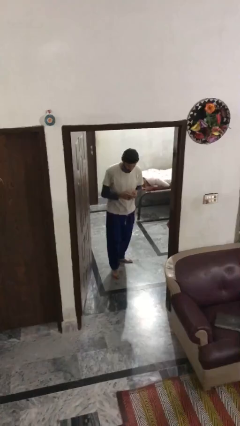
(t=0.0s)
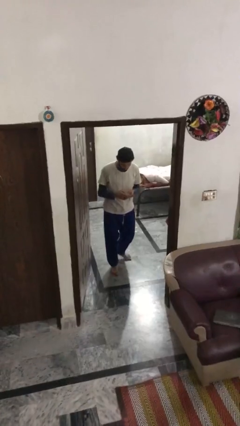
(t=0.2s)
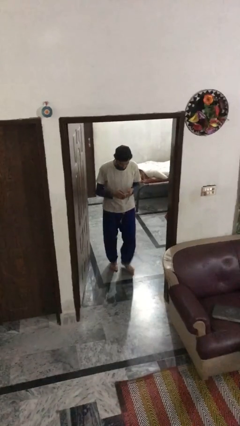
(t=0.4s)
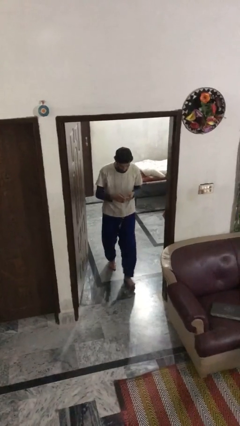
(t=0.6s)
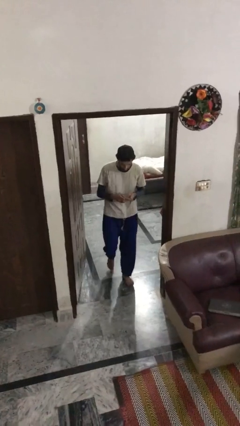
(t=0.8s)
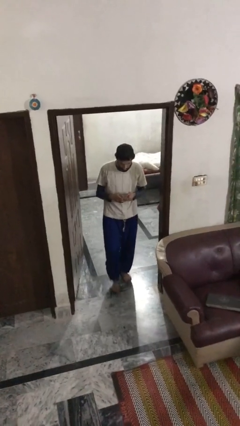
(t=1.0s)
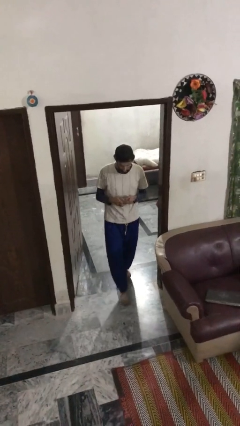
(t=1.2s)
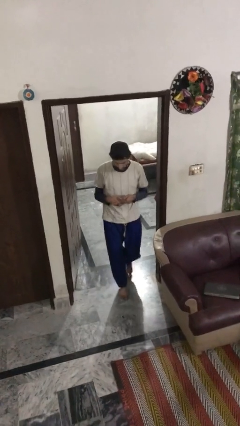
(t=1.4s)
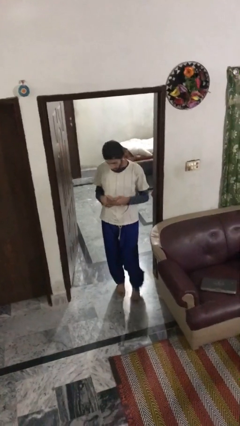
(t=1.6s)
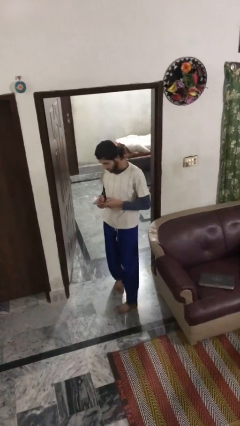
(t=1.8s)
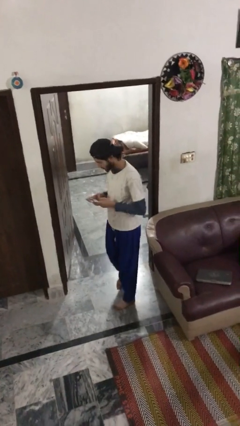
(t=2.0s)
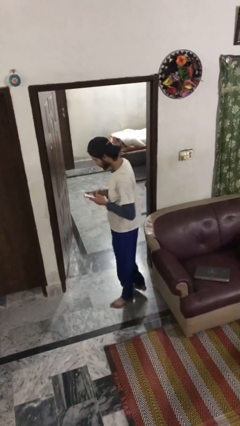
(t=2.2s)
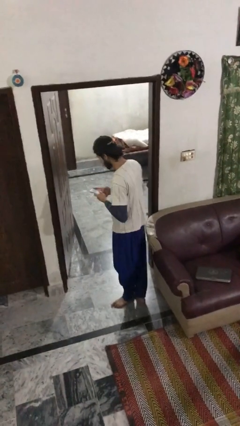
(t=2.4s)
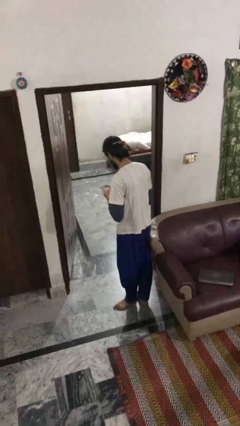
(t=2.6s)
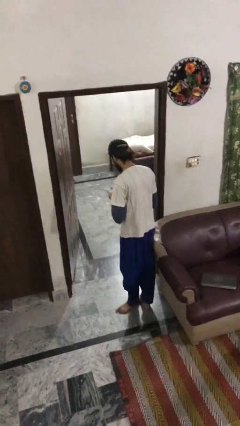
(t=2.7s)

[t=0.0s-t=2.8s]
person enters scene through structure

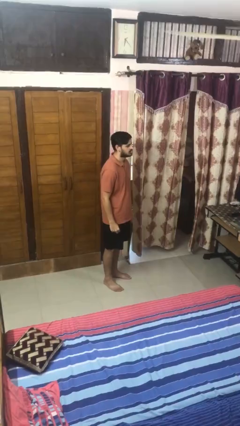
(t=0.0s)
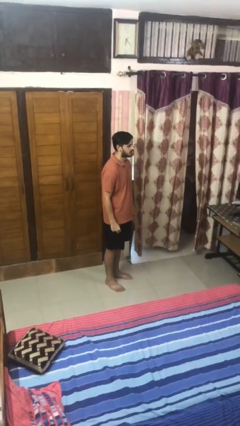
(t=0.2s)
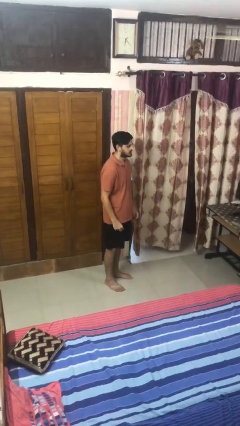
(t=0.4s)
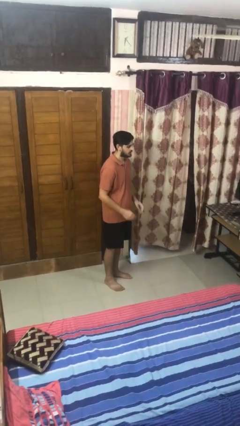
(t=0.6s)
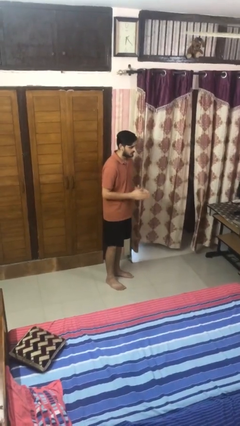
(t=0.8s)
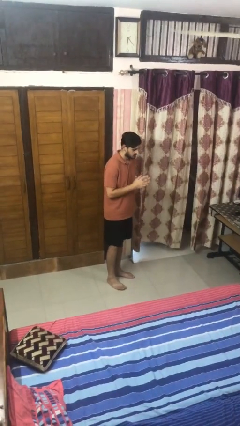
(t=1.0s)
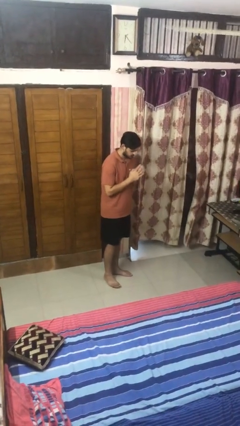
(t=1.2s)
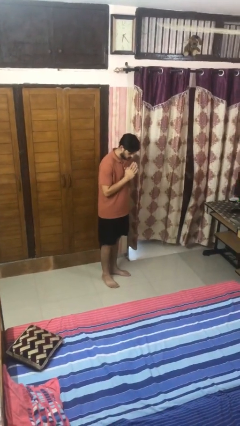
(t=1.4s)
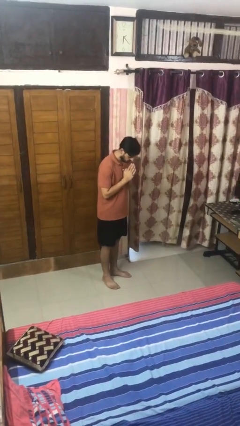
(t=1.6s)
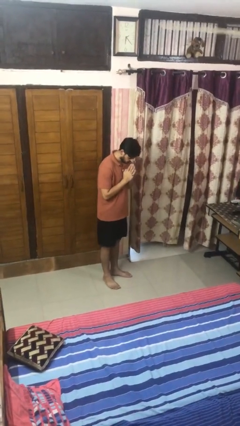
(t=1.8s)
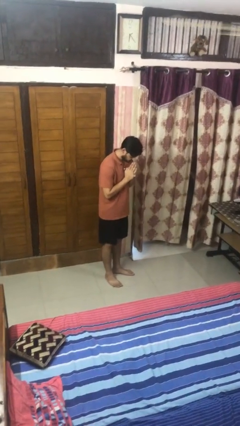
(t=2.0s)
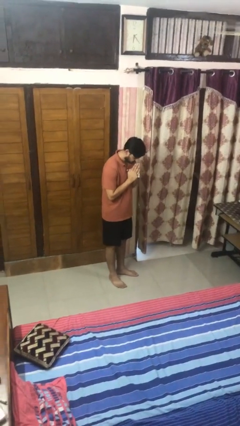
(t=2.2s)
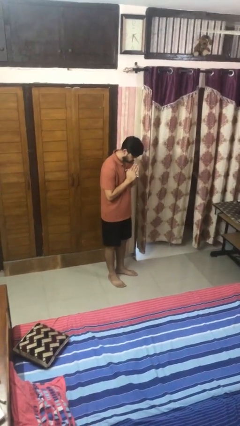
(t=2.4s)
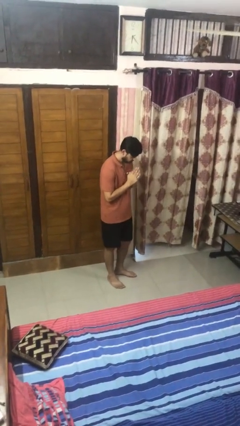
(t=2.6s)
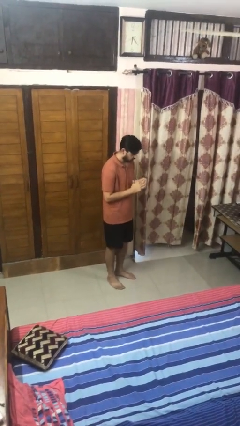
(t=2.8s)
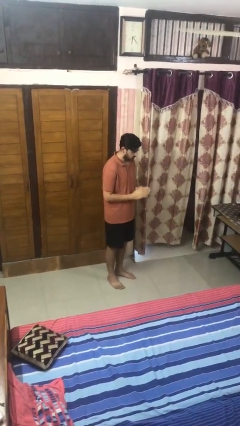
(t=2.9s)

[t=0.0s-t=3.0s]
person prays

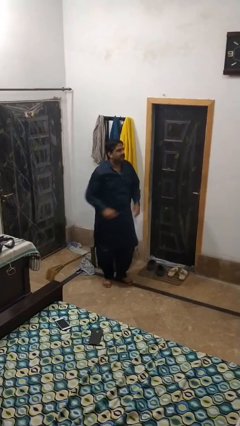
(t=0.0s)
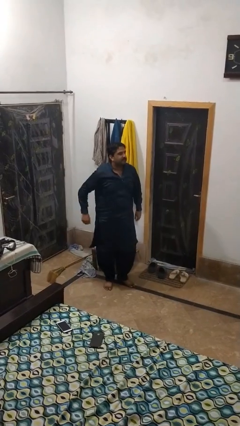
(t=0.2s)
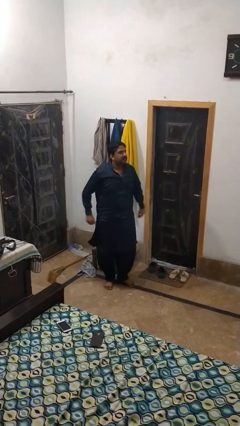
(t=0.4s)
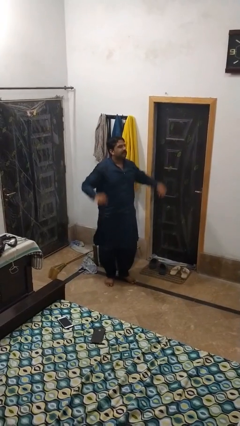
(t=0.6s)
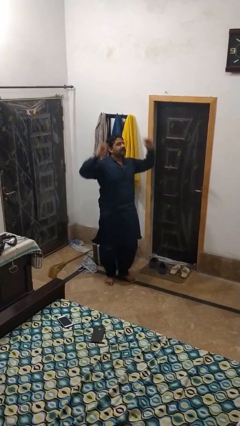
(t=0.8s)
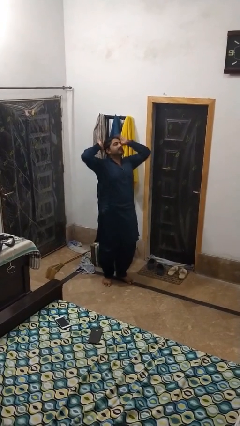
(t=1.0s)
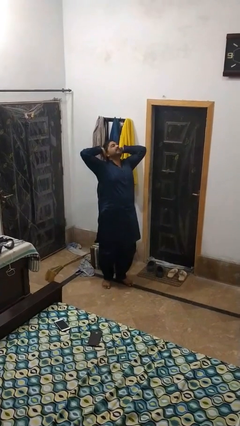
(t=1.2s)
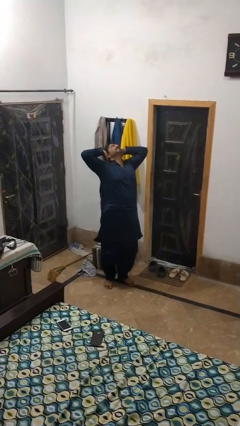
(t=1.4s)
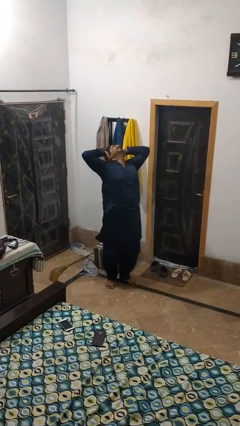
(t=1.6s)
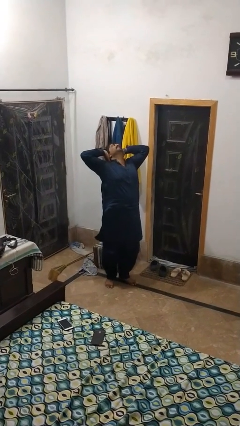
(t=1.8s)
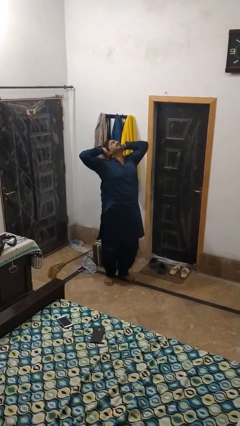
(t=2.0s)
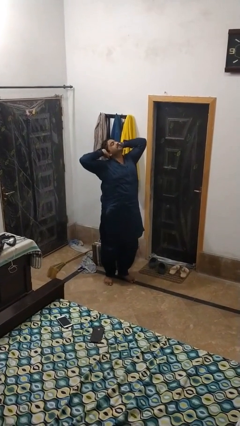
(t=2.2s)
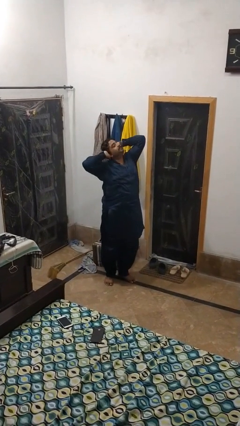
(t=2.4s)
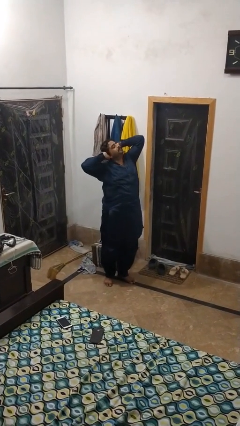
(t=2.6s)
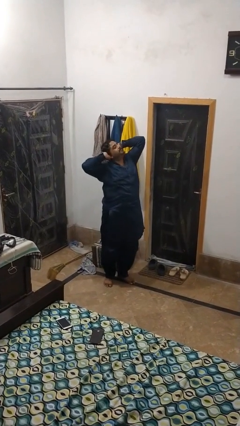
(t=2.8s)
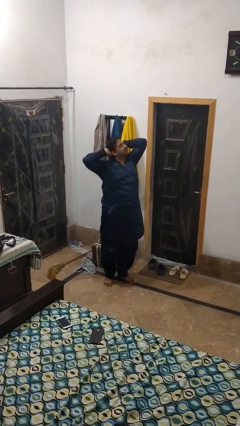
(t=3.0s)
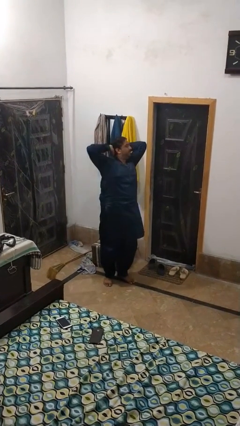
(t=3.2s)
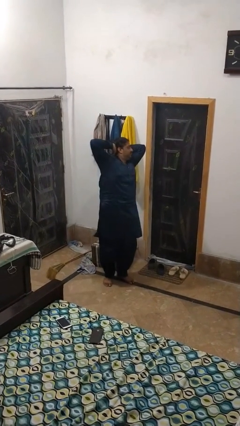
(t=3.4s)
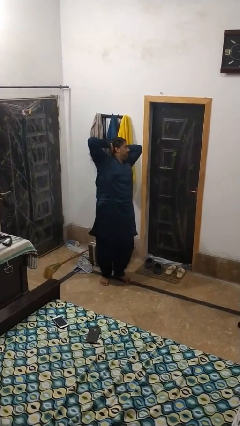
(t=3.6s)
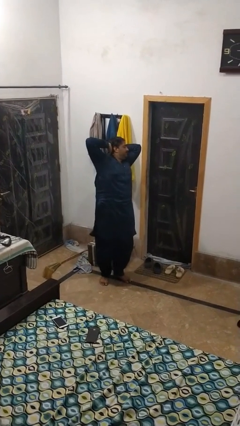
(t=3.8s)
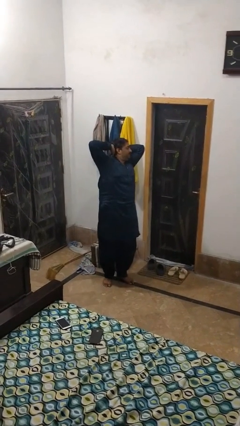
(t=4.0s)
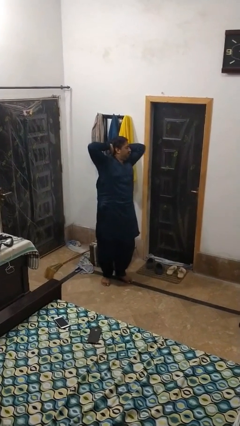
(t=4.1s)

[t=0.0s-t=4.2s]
person stretches arms over head

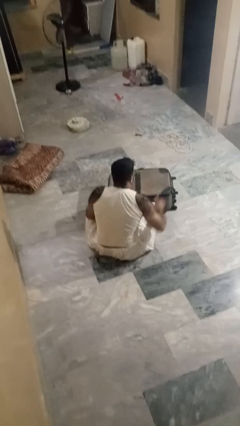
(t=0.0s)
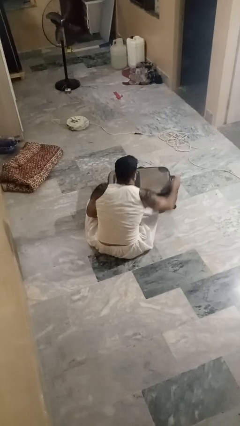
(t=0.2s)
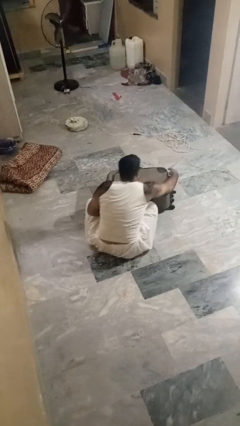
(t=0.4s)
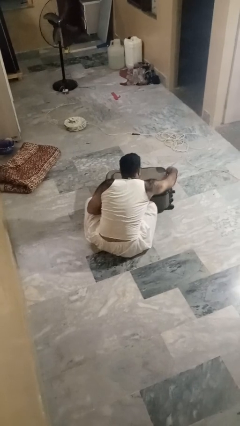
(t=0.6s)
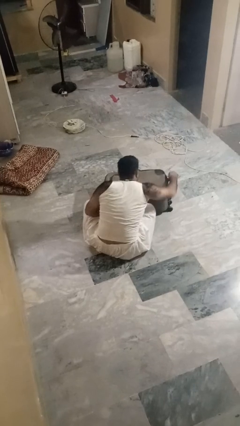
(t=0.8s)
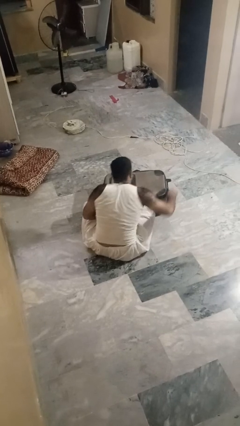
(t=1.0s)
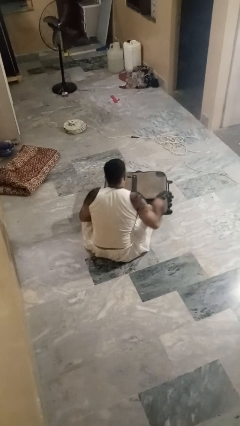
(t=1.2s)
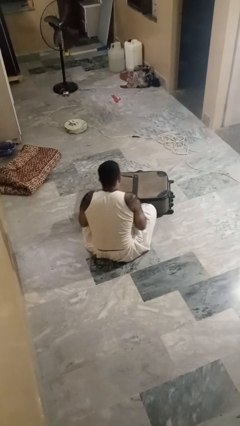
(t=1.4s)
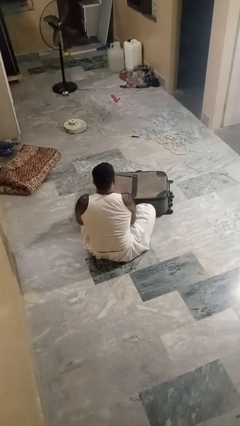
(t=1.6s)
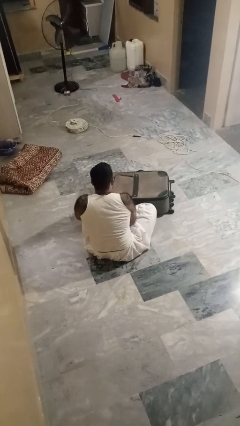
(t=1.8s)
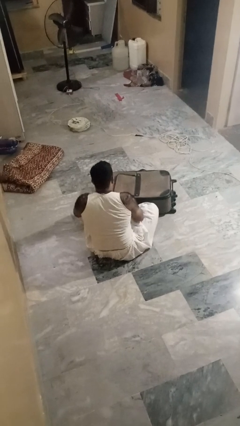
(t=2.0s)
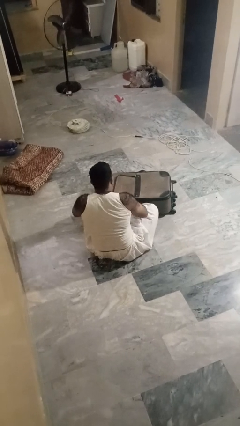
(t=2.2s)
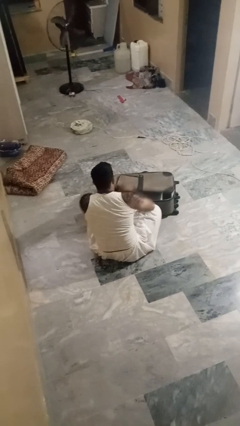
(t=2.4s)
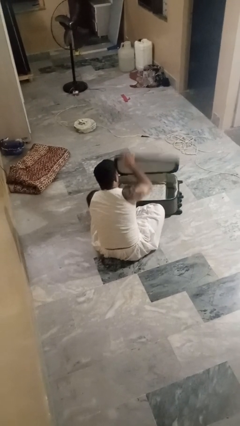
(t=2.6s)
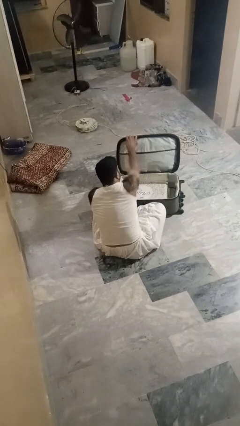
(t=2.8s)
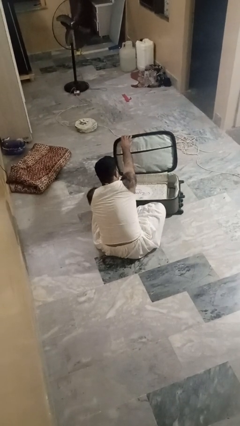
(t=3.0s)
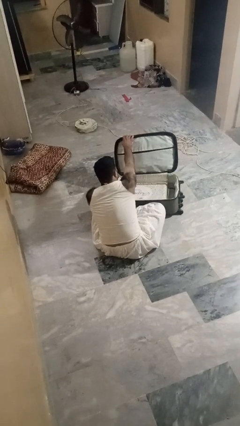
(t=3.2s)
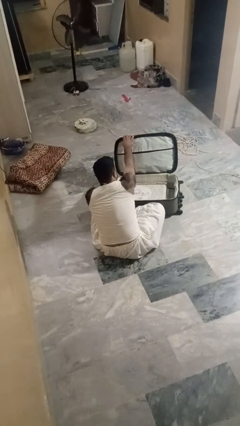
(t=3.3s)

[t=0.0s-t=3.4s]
person opens suitcase

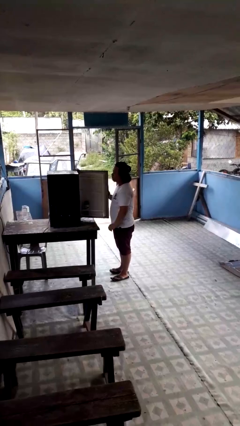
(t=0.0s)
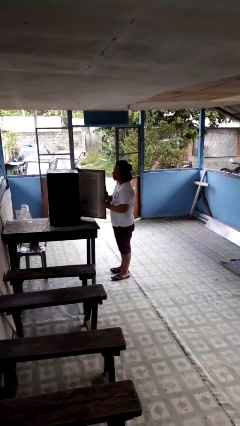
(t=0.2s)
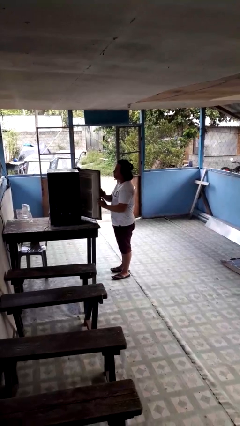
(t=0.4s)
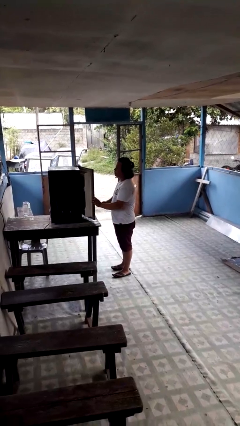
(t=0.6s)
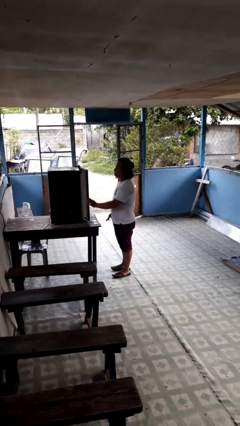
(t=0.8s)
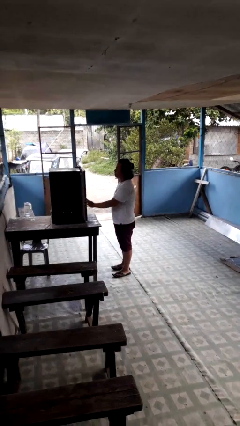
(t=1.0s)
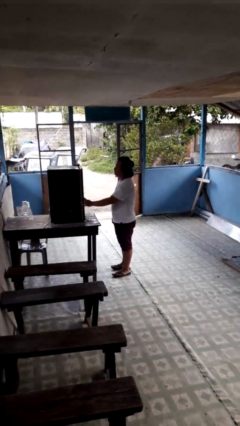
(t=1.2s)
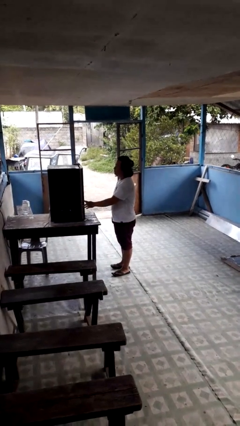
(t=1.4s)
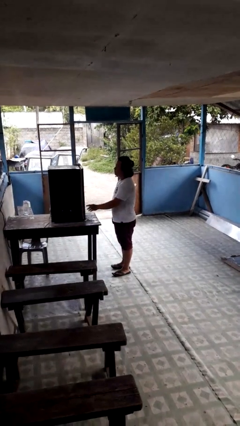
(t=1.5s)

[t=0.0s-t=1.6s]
person closes refrigerator

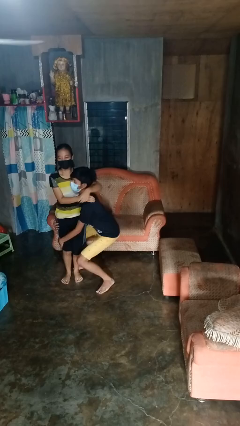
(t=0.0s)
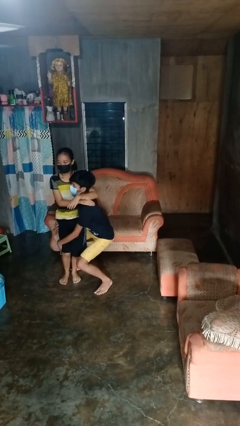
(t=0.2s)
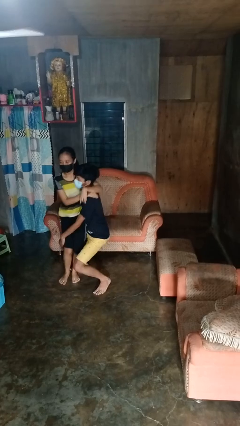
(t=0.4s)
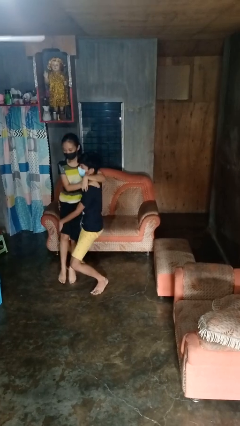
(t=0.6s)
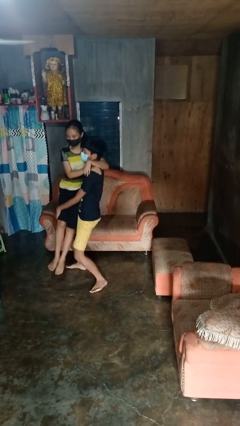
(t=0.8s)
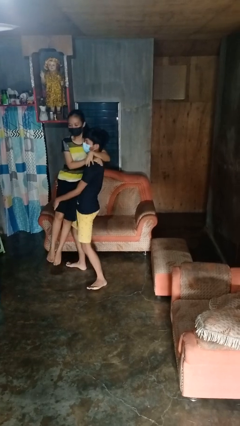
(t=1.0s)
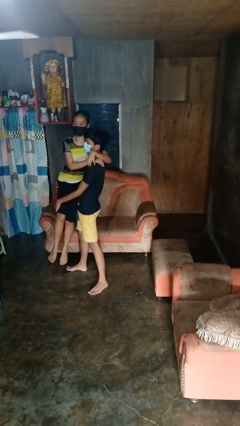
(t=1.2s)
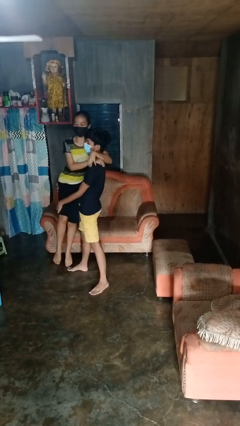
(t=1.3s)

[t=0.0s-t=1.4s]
person picks up person

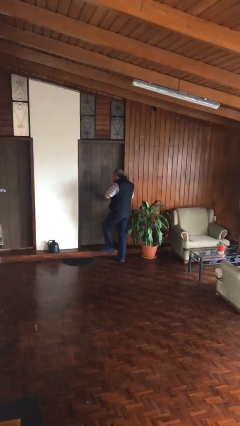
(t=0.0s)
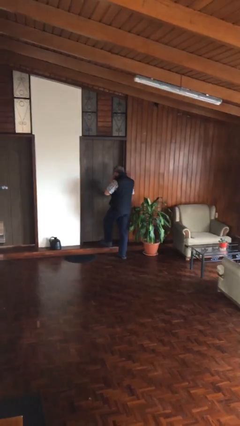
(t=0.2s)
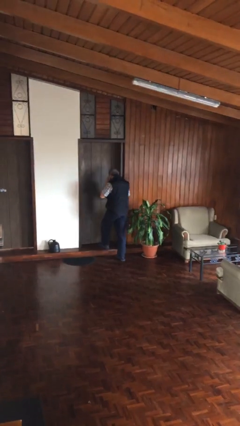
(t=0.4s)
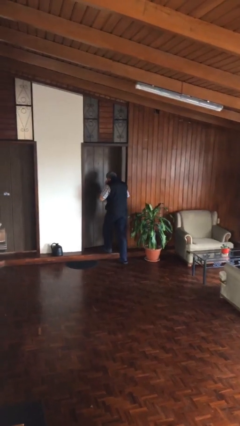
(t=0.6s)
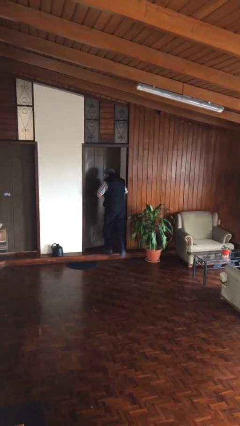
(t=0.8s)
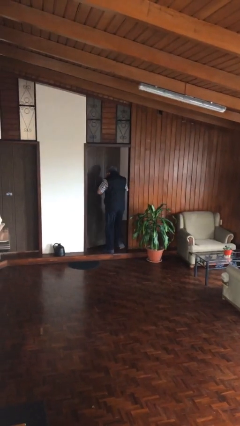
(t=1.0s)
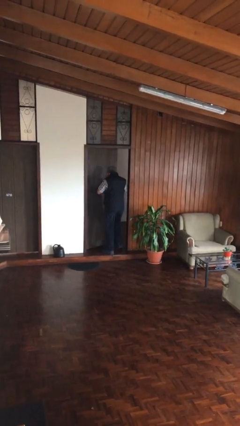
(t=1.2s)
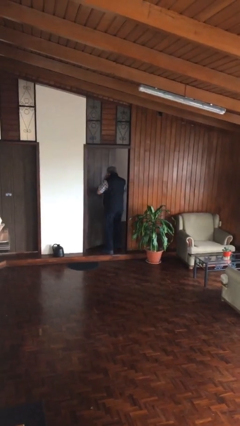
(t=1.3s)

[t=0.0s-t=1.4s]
person opens facility door
